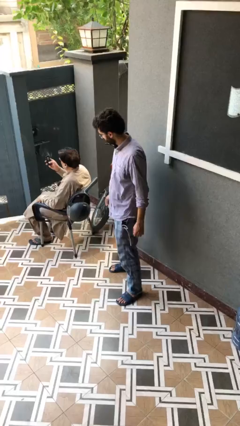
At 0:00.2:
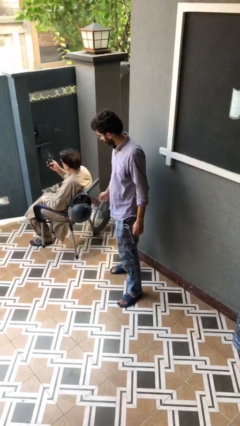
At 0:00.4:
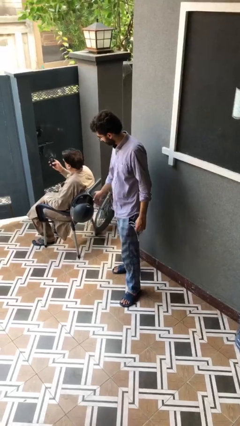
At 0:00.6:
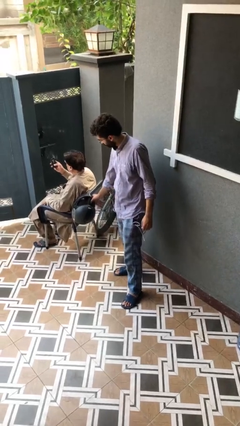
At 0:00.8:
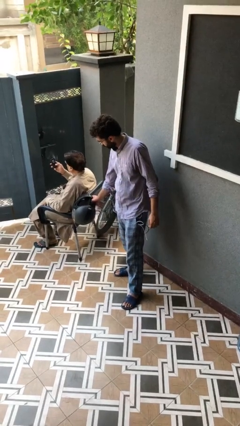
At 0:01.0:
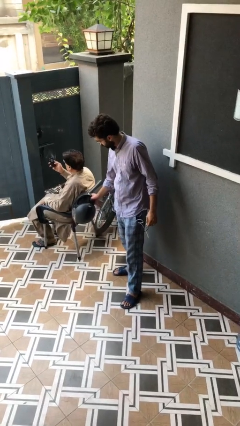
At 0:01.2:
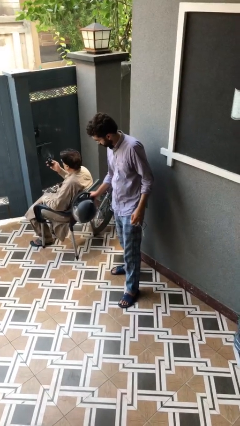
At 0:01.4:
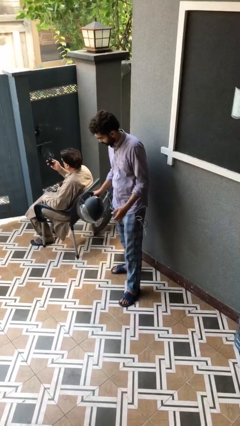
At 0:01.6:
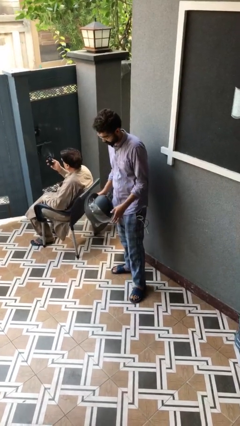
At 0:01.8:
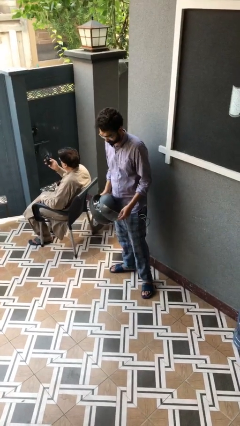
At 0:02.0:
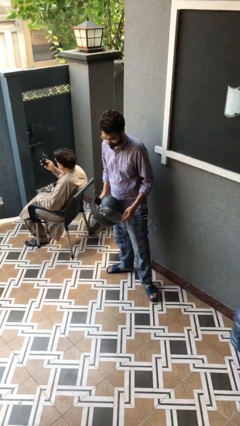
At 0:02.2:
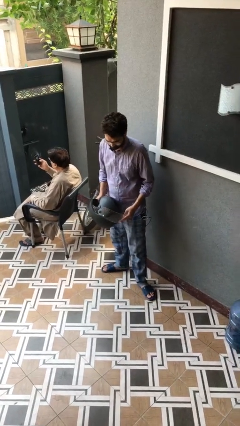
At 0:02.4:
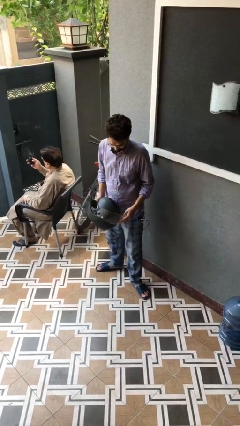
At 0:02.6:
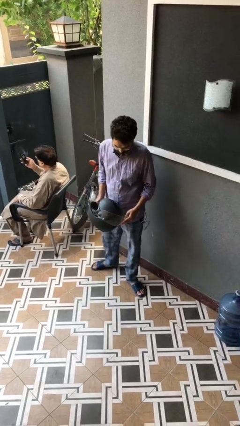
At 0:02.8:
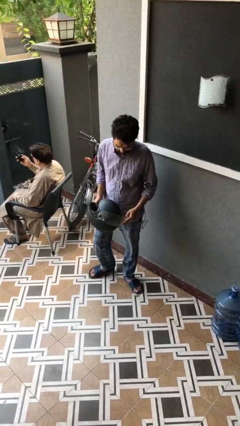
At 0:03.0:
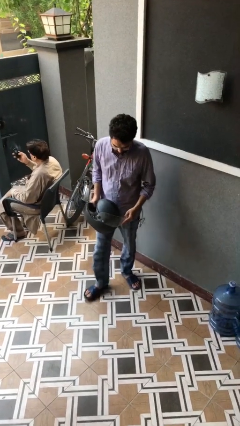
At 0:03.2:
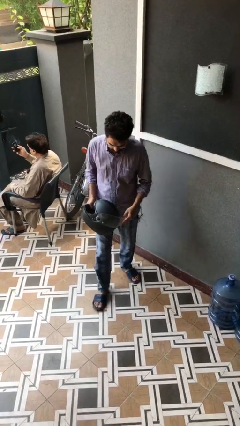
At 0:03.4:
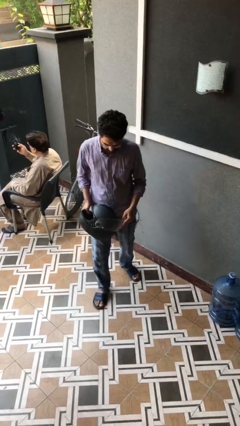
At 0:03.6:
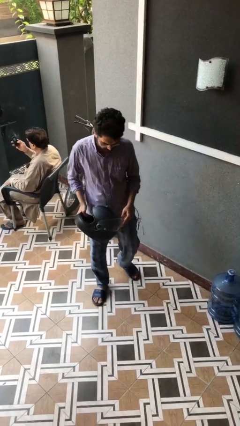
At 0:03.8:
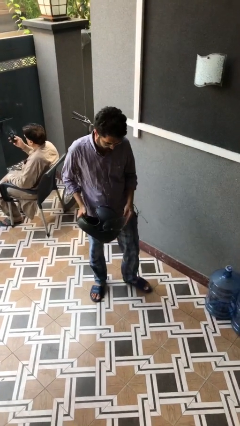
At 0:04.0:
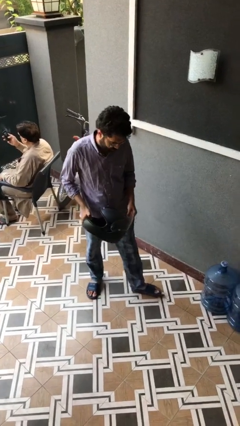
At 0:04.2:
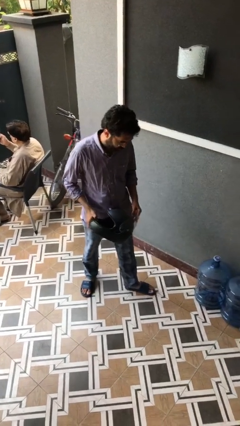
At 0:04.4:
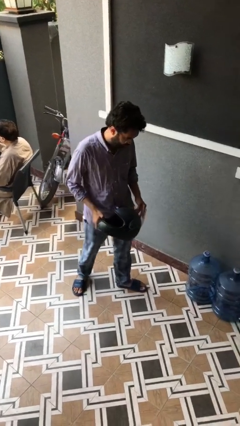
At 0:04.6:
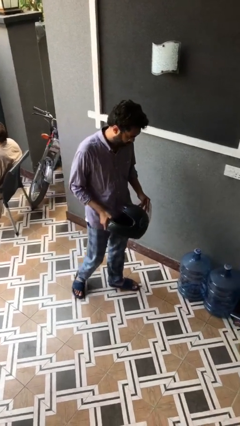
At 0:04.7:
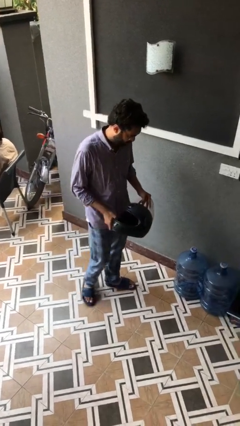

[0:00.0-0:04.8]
person steals object from person

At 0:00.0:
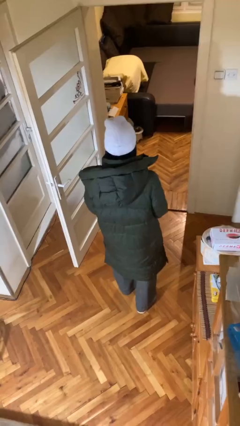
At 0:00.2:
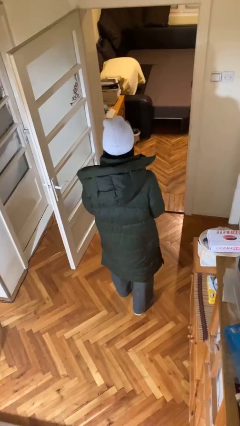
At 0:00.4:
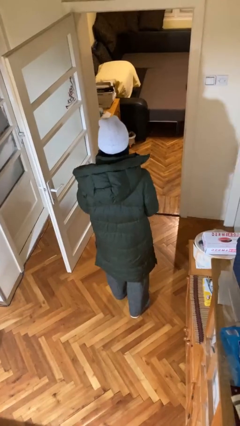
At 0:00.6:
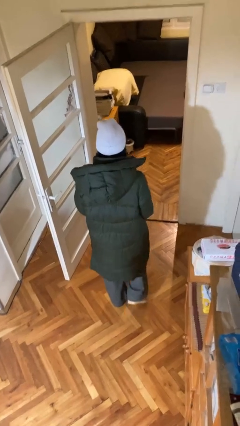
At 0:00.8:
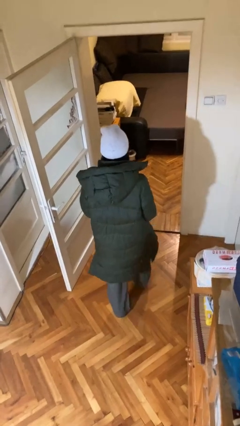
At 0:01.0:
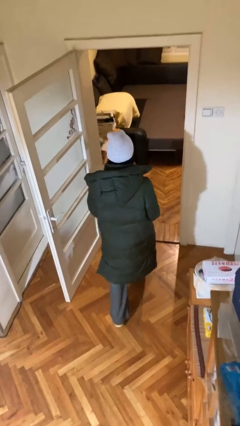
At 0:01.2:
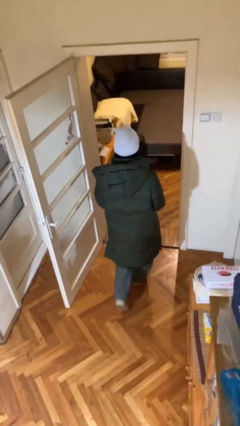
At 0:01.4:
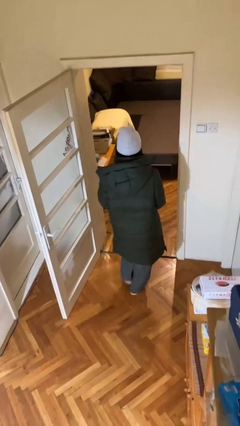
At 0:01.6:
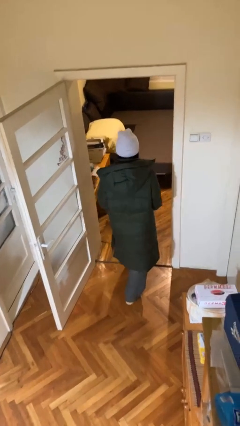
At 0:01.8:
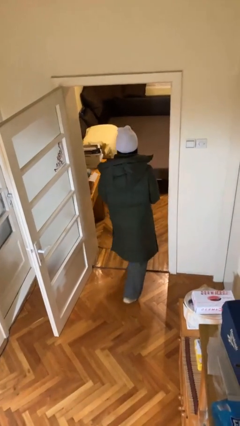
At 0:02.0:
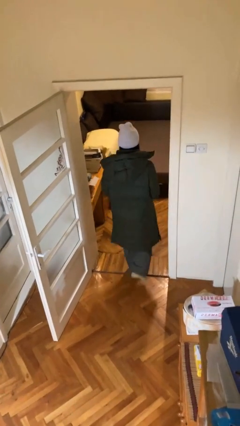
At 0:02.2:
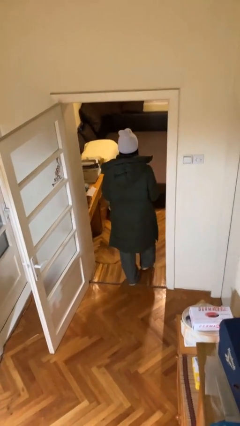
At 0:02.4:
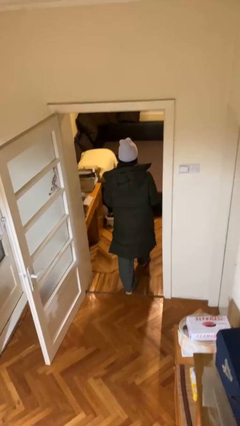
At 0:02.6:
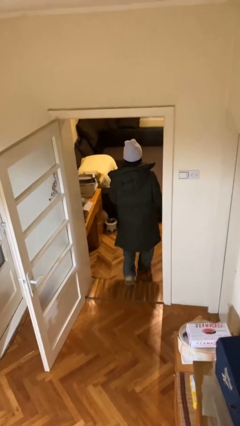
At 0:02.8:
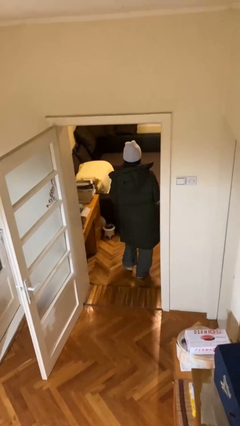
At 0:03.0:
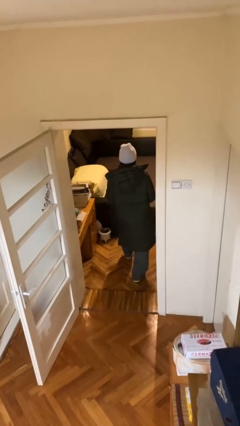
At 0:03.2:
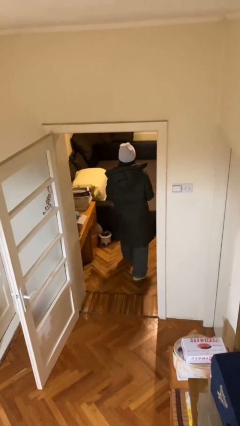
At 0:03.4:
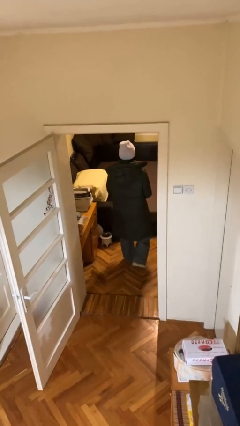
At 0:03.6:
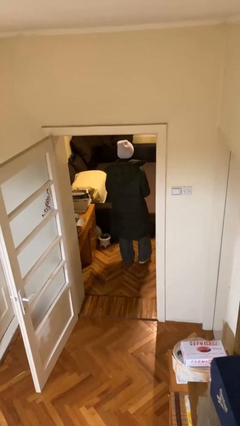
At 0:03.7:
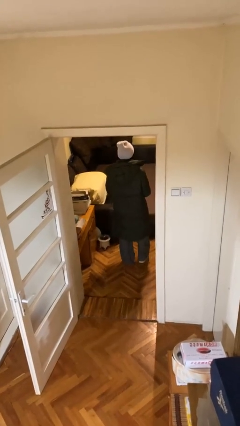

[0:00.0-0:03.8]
person exits scene through structure

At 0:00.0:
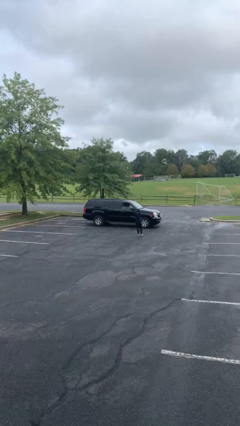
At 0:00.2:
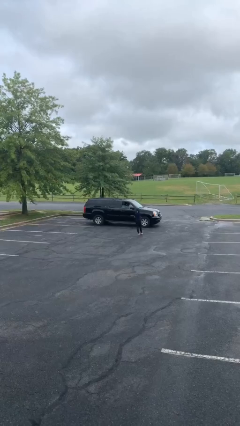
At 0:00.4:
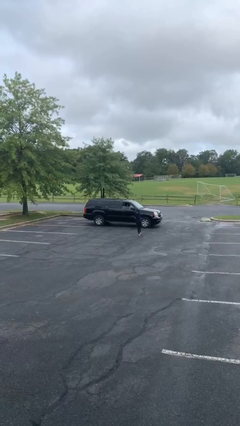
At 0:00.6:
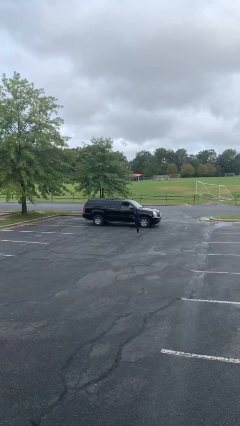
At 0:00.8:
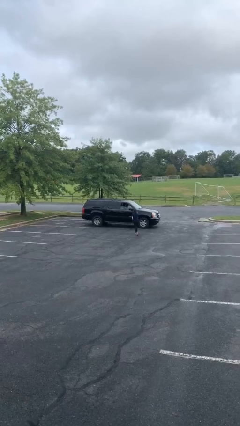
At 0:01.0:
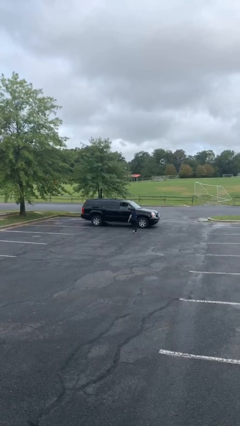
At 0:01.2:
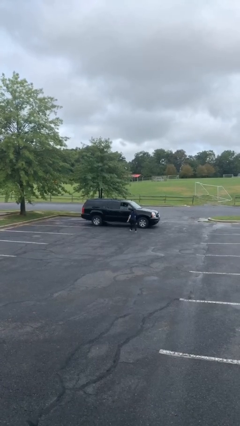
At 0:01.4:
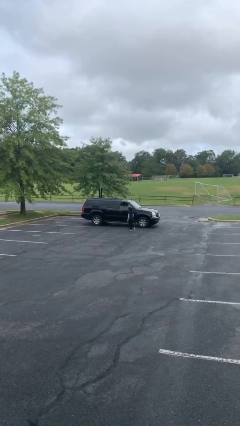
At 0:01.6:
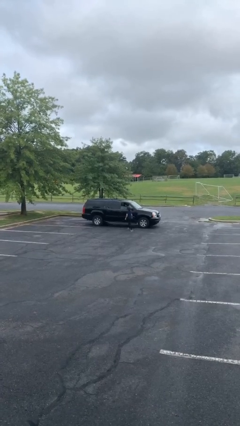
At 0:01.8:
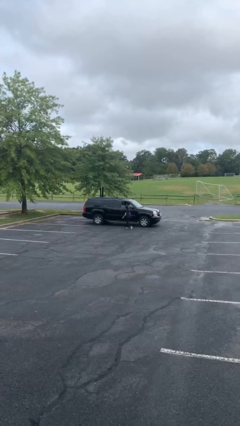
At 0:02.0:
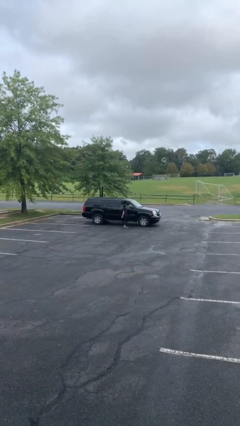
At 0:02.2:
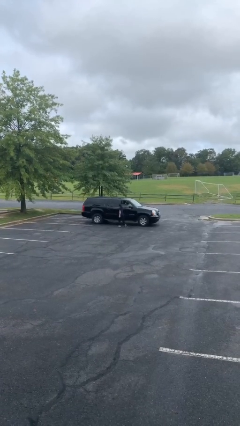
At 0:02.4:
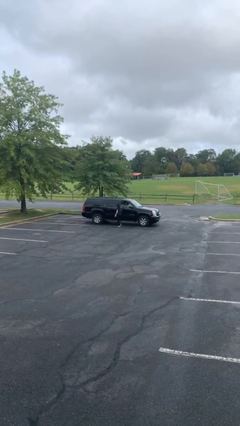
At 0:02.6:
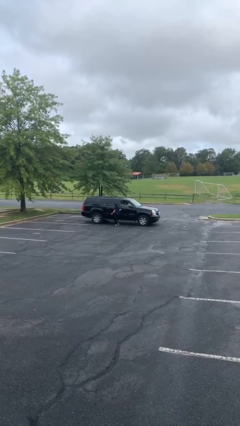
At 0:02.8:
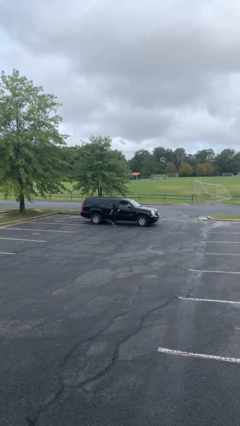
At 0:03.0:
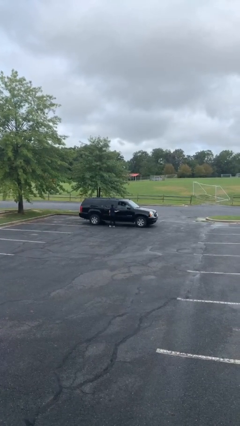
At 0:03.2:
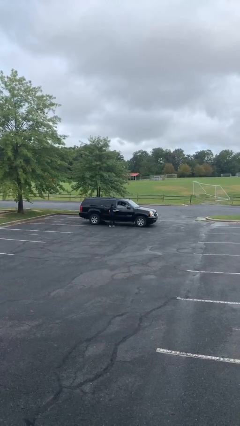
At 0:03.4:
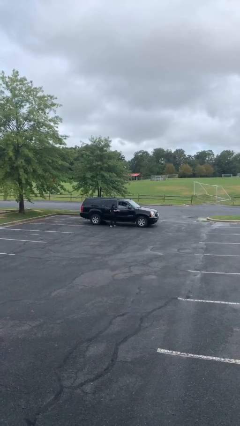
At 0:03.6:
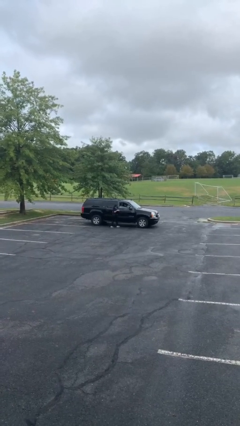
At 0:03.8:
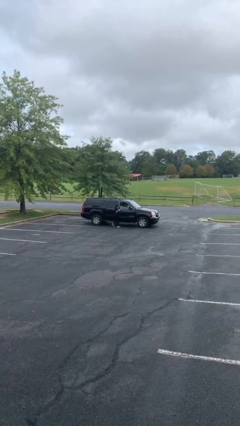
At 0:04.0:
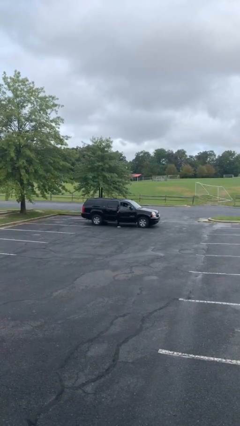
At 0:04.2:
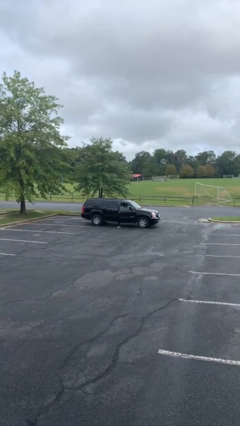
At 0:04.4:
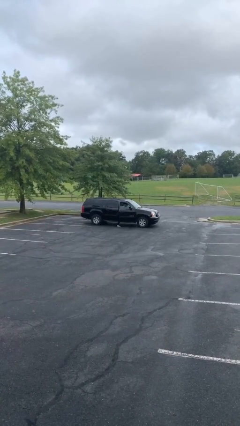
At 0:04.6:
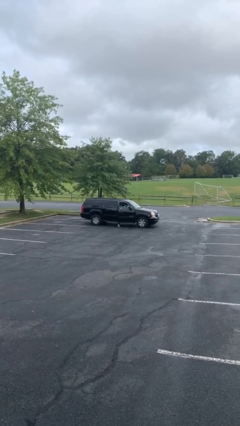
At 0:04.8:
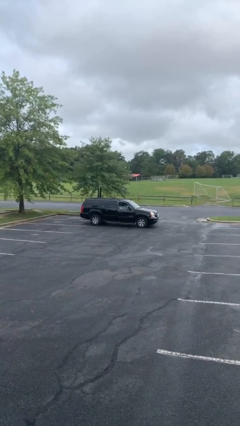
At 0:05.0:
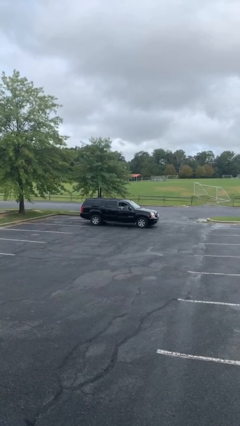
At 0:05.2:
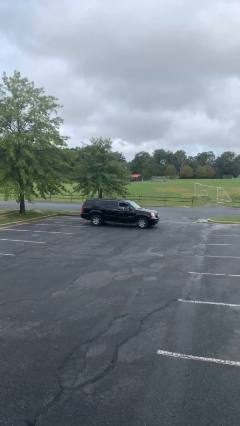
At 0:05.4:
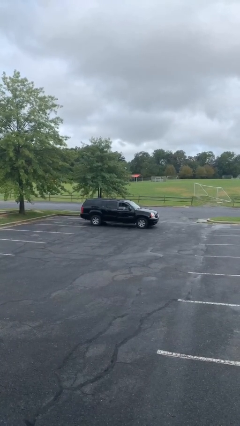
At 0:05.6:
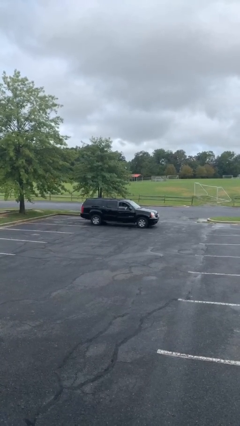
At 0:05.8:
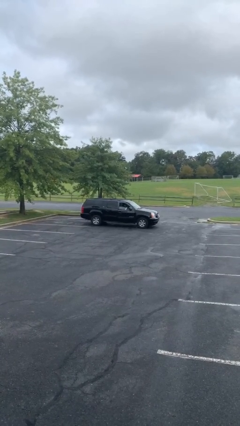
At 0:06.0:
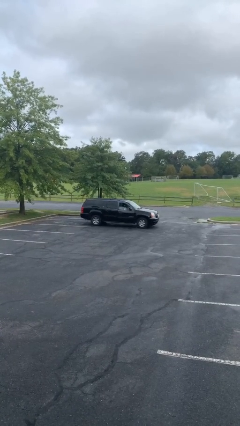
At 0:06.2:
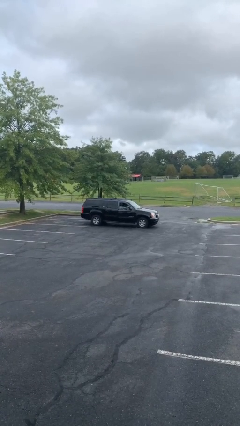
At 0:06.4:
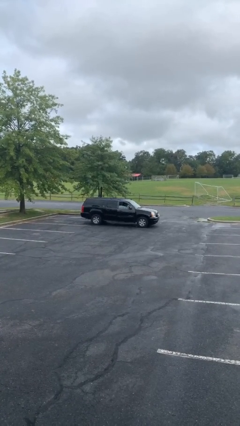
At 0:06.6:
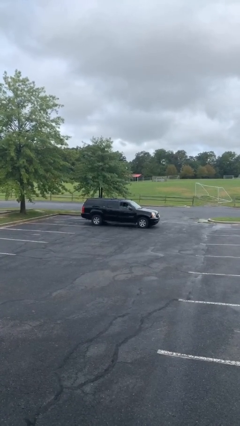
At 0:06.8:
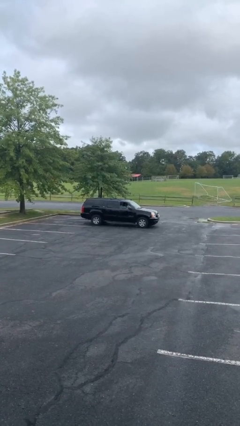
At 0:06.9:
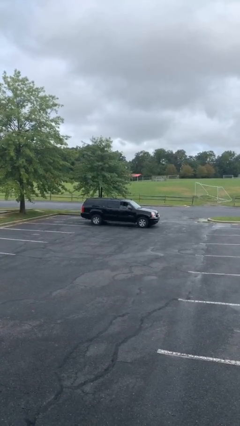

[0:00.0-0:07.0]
car picks up person

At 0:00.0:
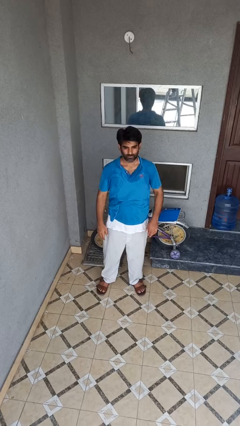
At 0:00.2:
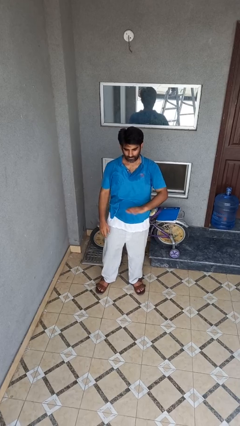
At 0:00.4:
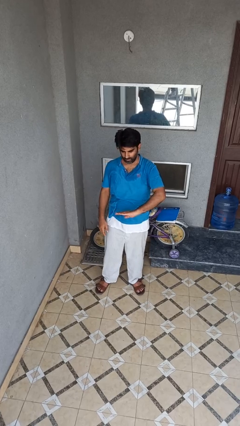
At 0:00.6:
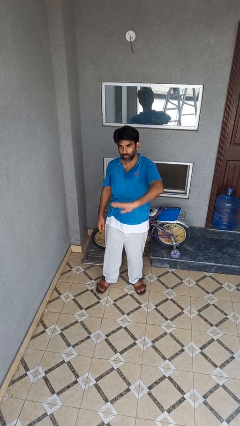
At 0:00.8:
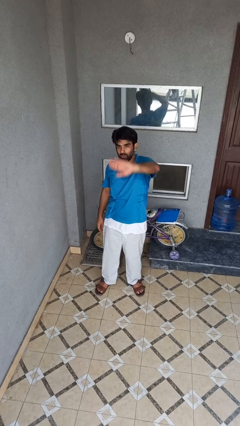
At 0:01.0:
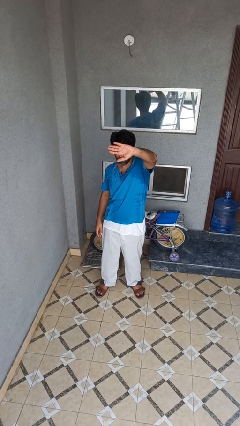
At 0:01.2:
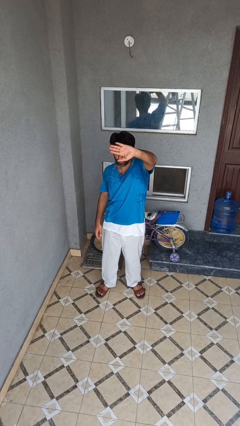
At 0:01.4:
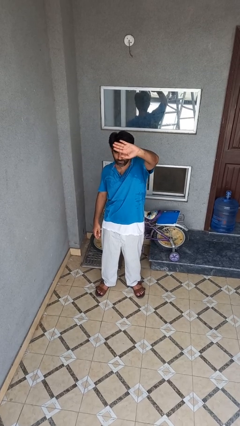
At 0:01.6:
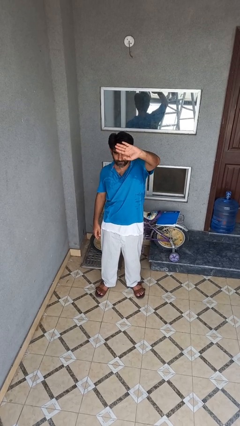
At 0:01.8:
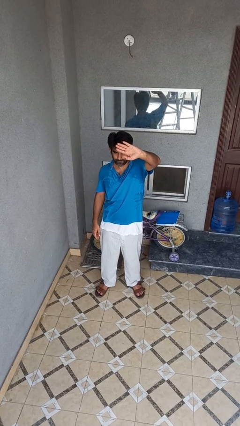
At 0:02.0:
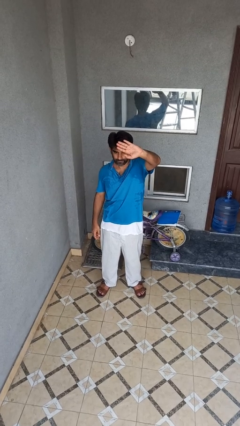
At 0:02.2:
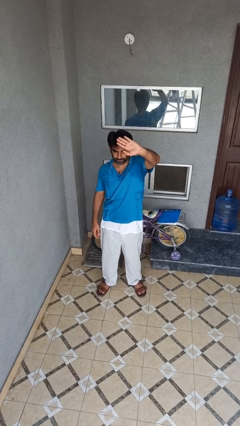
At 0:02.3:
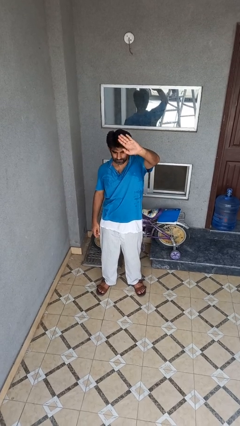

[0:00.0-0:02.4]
person gestures swipe up
